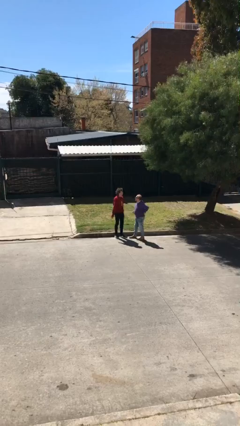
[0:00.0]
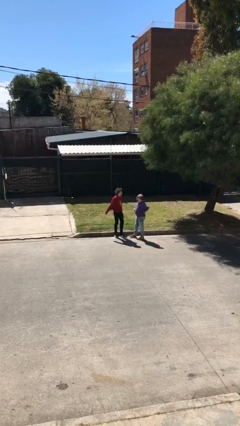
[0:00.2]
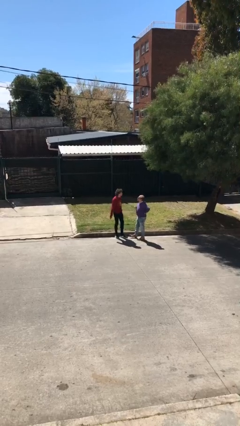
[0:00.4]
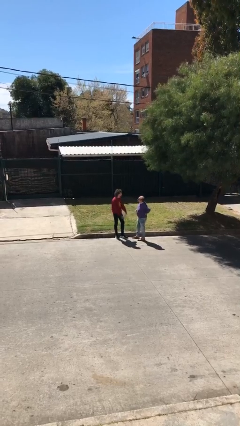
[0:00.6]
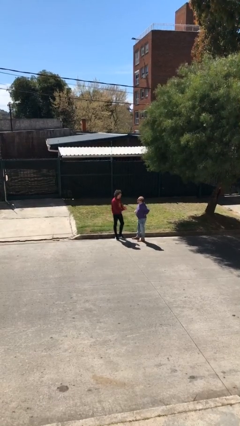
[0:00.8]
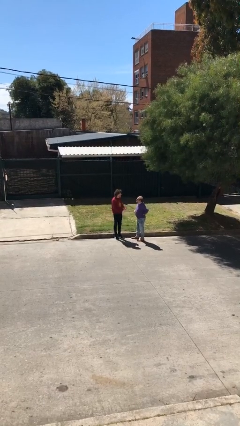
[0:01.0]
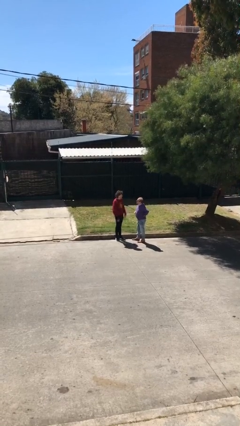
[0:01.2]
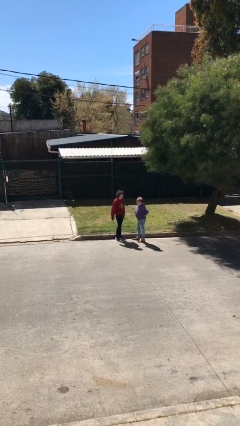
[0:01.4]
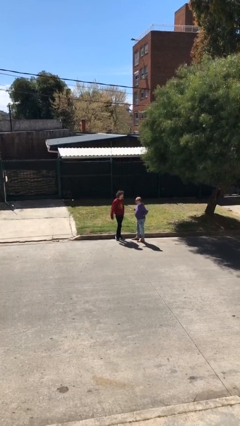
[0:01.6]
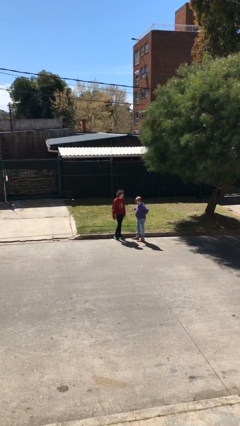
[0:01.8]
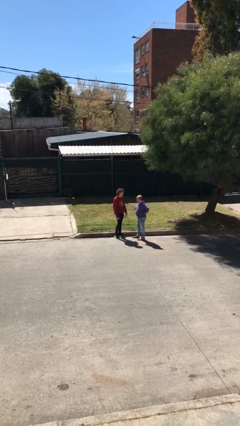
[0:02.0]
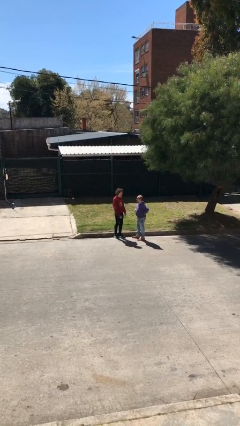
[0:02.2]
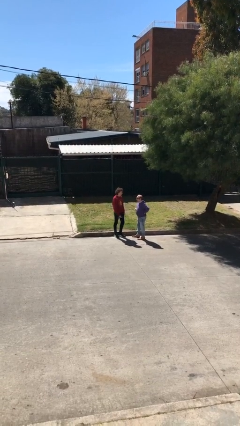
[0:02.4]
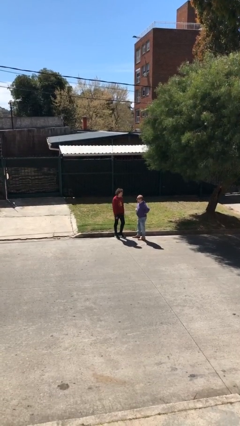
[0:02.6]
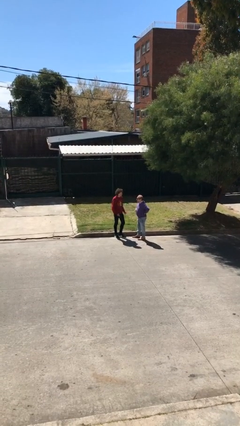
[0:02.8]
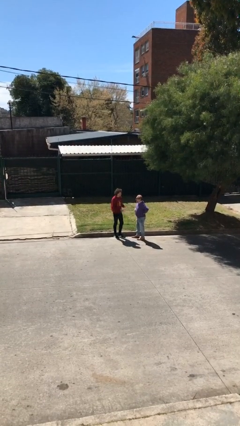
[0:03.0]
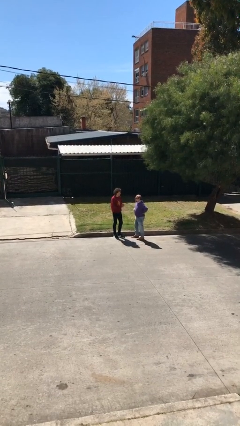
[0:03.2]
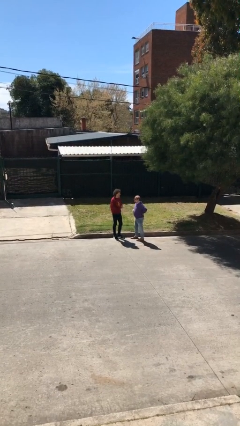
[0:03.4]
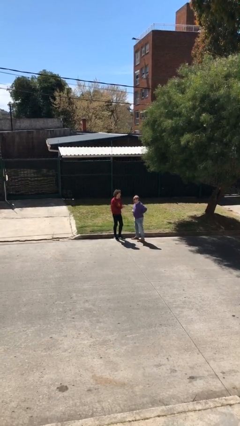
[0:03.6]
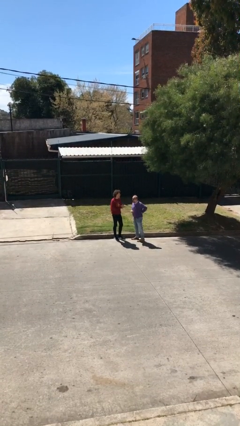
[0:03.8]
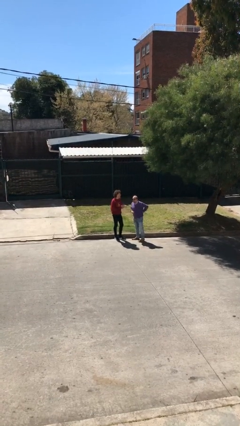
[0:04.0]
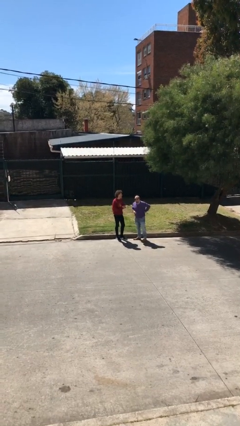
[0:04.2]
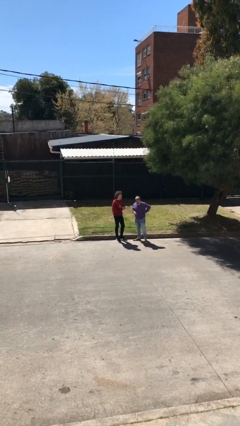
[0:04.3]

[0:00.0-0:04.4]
person talks to person

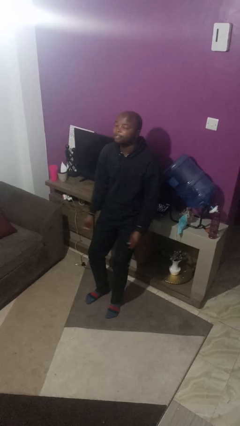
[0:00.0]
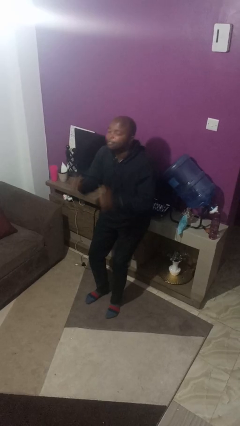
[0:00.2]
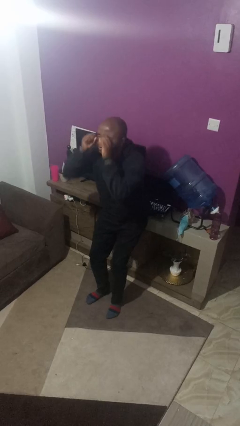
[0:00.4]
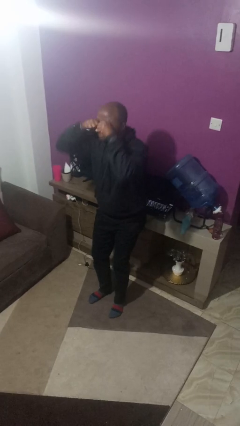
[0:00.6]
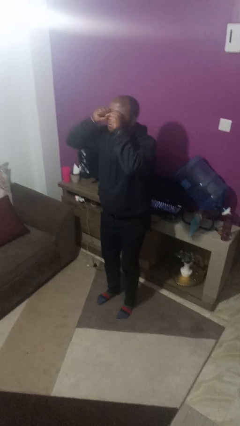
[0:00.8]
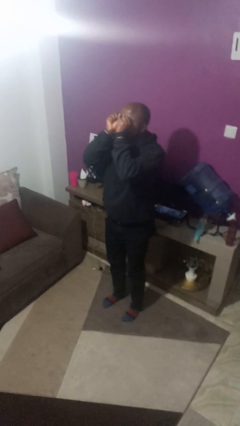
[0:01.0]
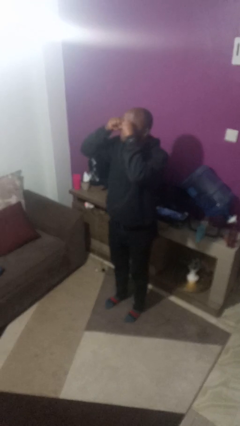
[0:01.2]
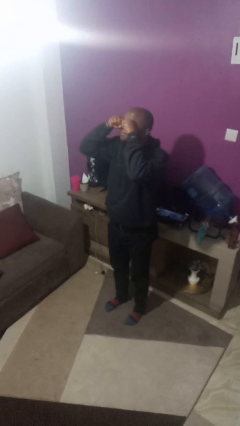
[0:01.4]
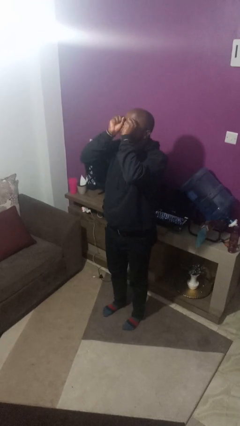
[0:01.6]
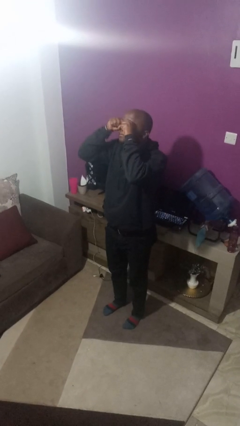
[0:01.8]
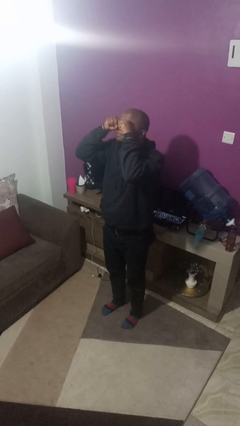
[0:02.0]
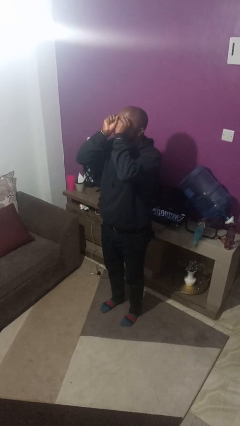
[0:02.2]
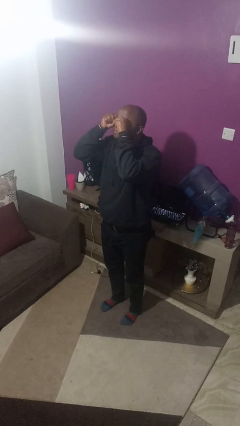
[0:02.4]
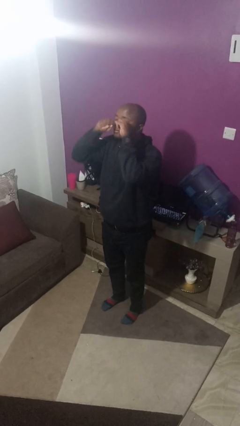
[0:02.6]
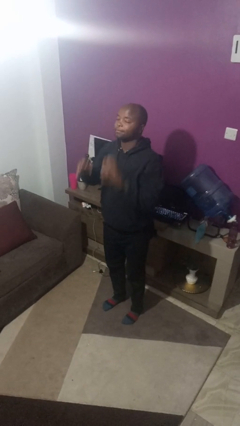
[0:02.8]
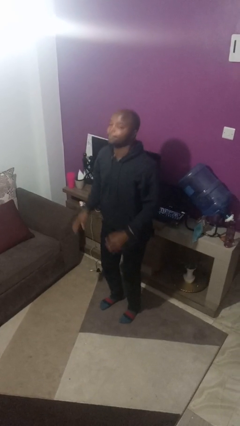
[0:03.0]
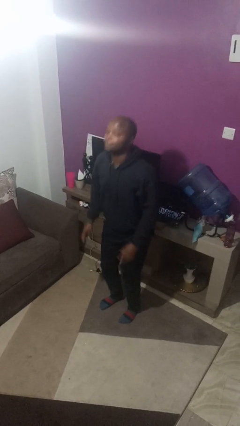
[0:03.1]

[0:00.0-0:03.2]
person rubs eyes

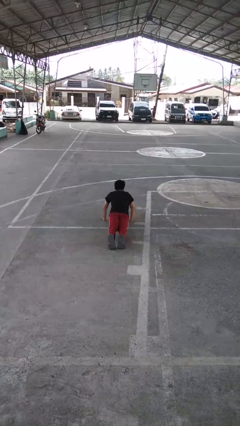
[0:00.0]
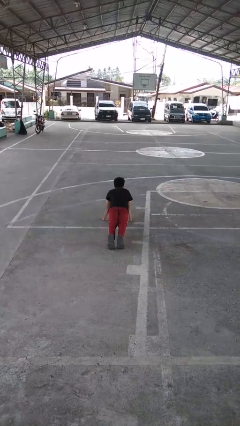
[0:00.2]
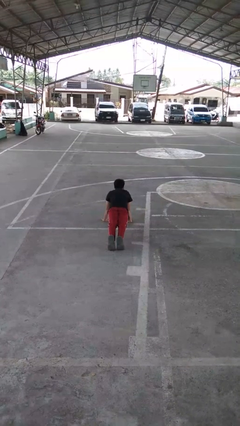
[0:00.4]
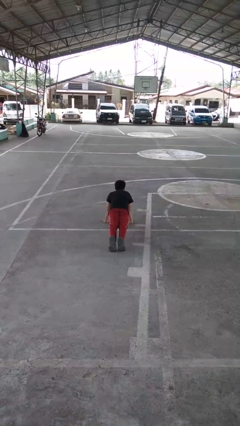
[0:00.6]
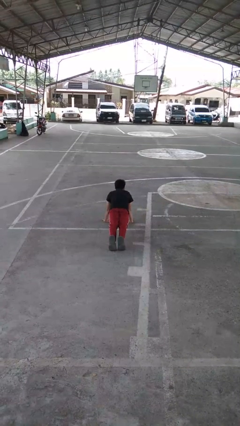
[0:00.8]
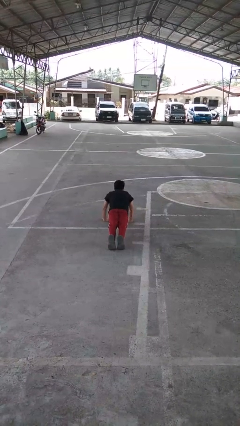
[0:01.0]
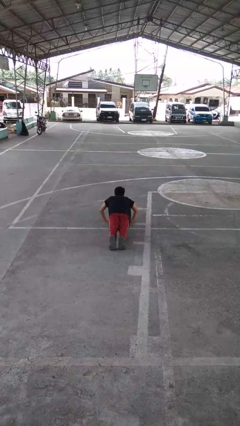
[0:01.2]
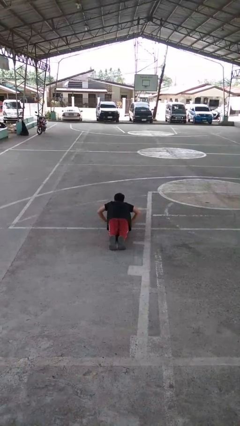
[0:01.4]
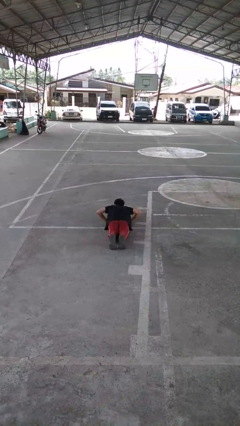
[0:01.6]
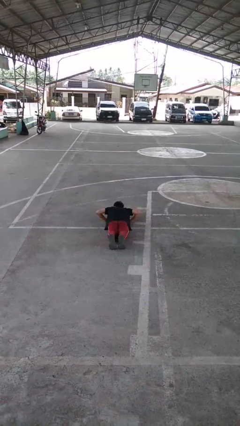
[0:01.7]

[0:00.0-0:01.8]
person exercises with pushup

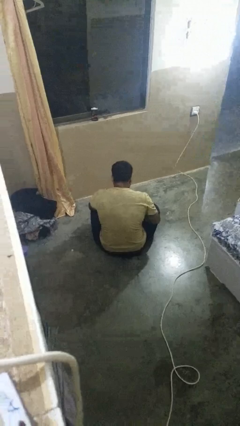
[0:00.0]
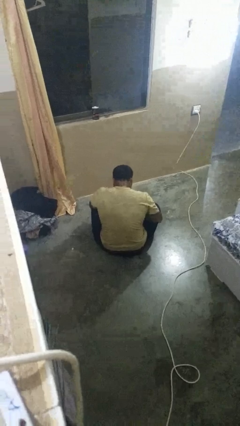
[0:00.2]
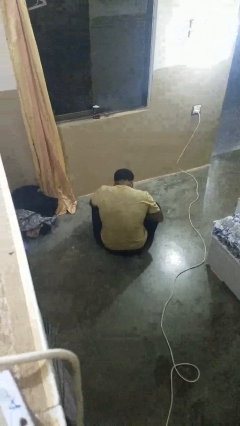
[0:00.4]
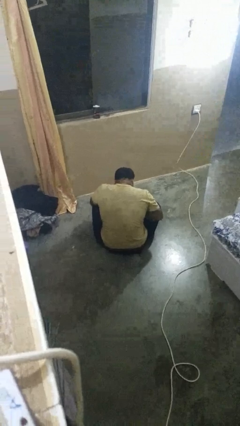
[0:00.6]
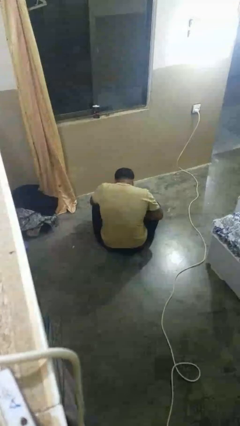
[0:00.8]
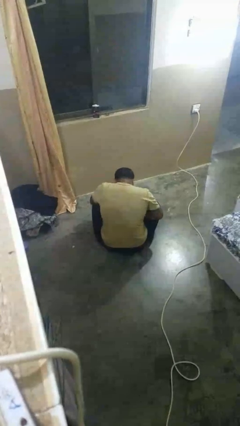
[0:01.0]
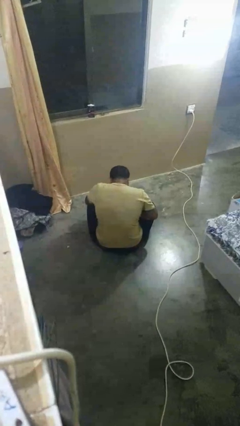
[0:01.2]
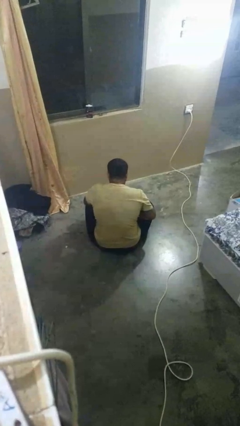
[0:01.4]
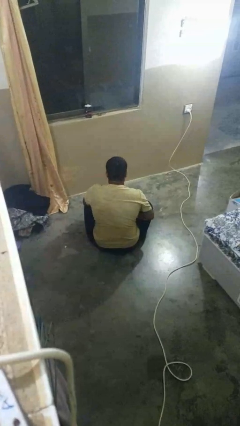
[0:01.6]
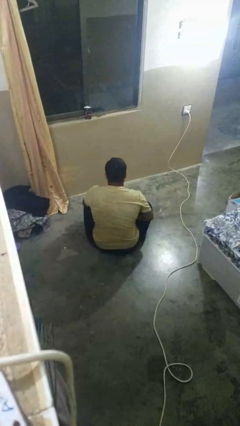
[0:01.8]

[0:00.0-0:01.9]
person looks at hands in lap

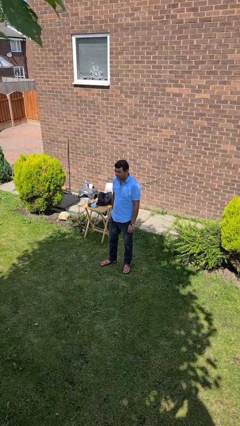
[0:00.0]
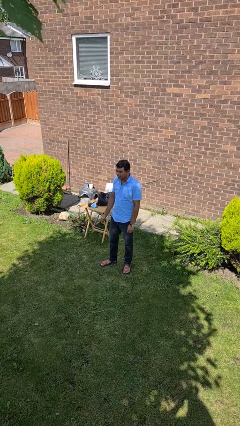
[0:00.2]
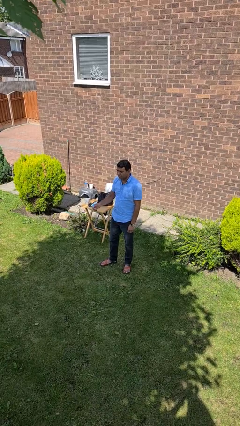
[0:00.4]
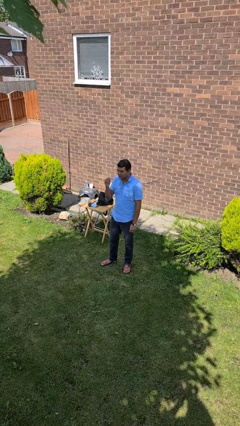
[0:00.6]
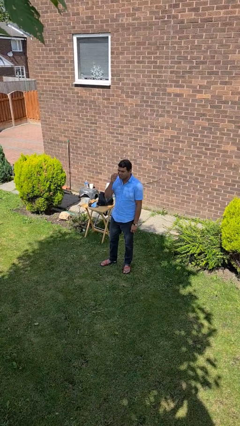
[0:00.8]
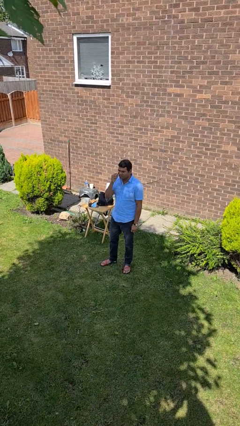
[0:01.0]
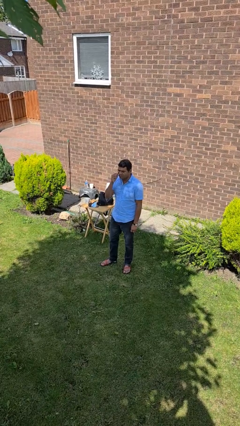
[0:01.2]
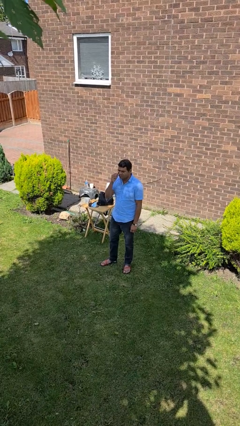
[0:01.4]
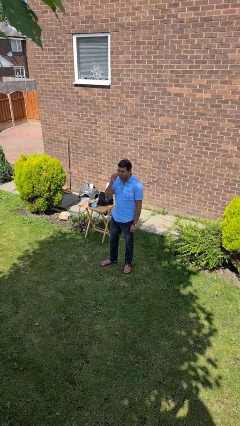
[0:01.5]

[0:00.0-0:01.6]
person flosses

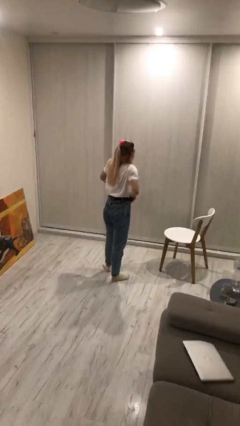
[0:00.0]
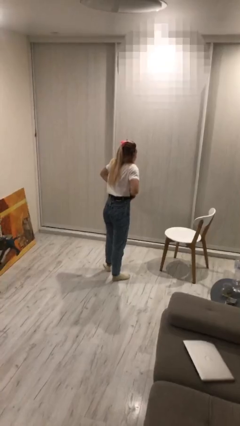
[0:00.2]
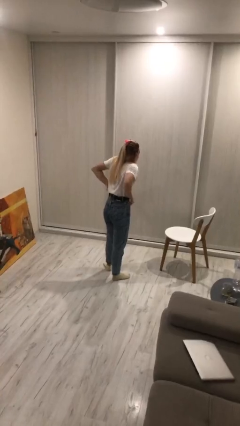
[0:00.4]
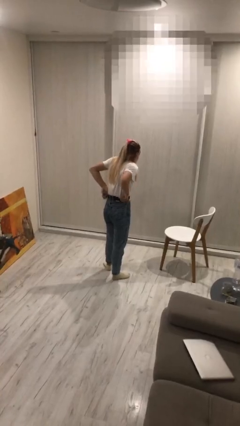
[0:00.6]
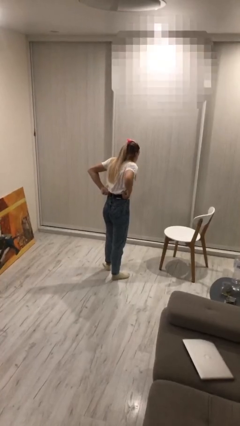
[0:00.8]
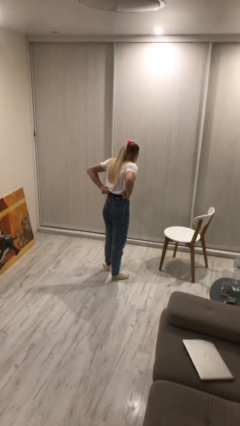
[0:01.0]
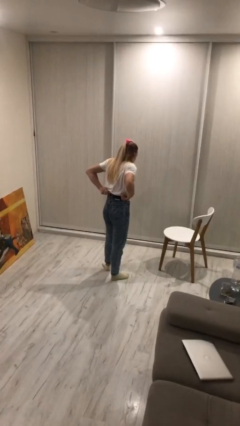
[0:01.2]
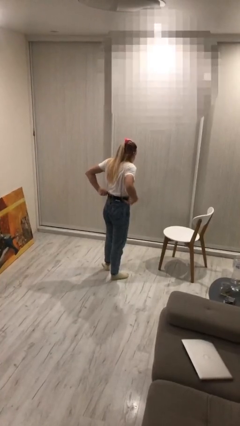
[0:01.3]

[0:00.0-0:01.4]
person hikes up pants

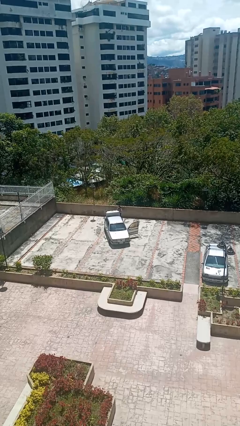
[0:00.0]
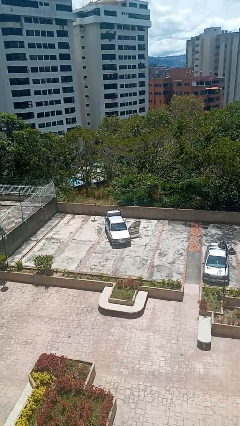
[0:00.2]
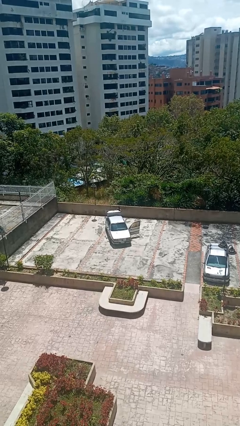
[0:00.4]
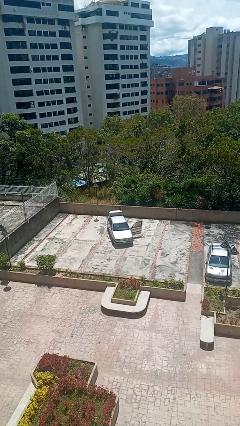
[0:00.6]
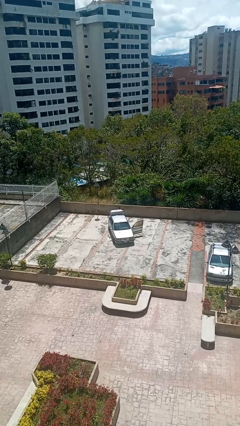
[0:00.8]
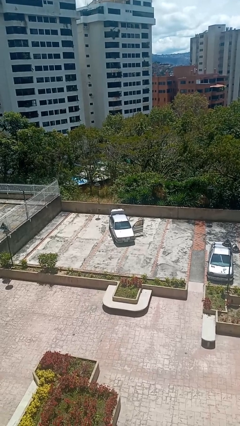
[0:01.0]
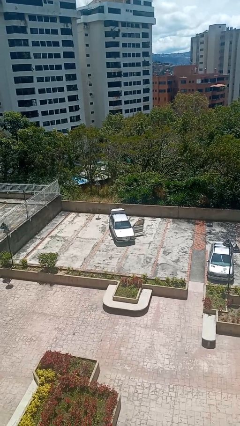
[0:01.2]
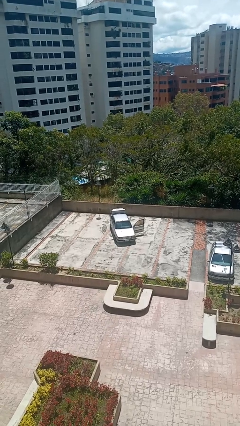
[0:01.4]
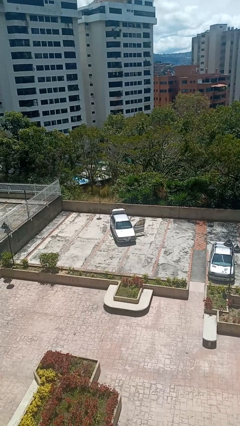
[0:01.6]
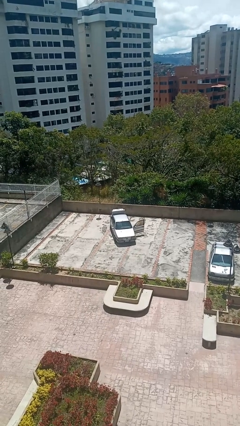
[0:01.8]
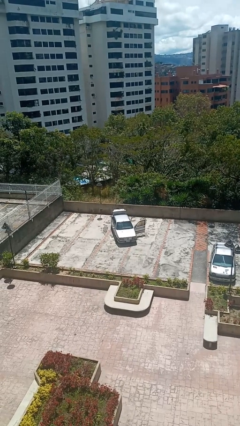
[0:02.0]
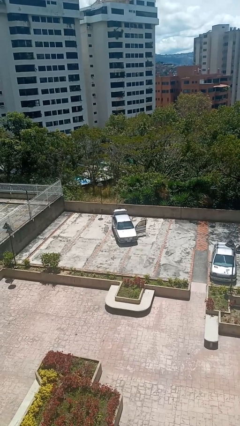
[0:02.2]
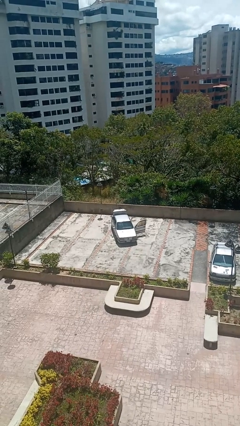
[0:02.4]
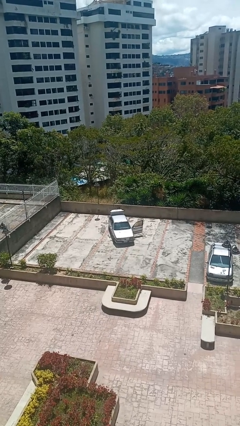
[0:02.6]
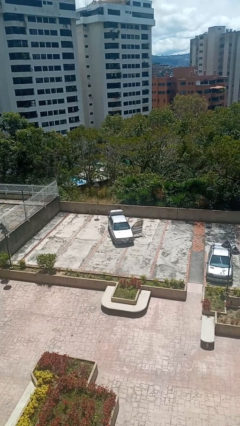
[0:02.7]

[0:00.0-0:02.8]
person loads car
